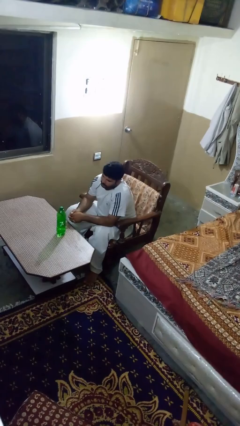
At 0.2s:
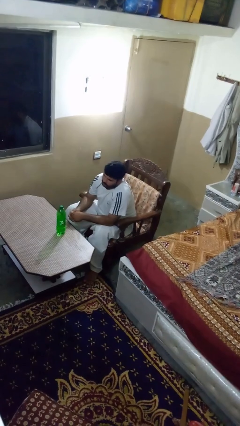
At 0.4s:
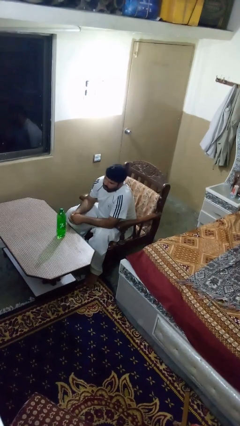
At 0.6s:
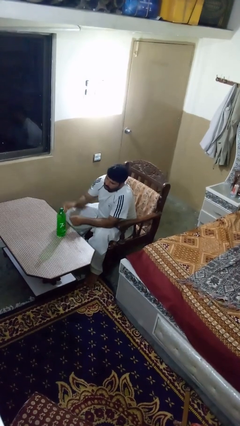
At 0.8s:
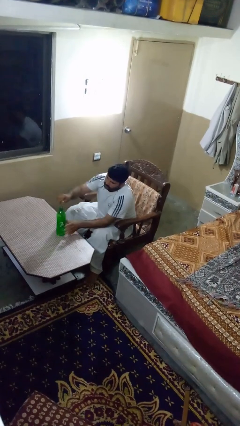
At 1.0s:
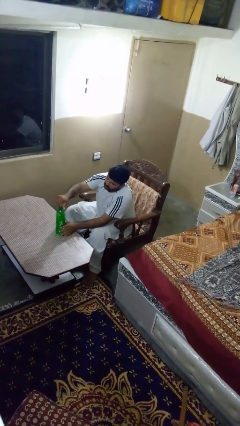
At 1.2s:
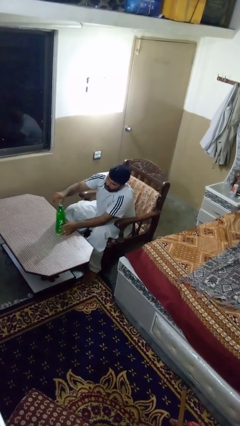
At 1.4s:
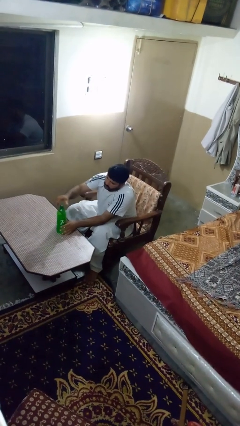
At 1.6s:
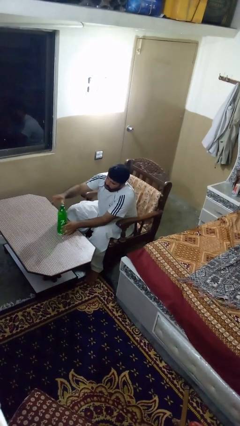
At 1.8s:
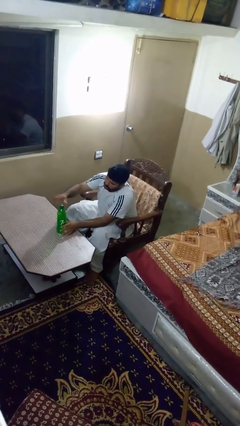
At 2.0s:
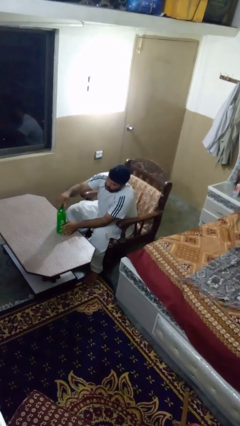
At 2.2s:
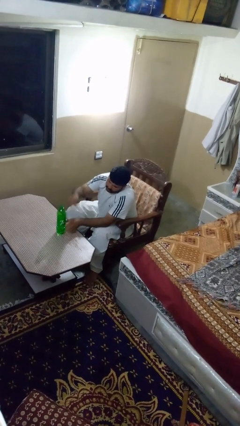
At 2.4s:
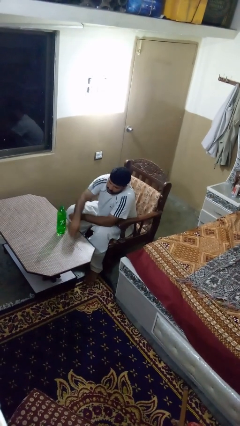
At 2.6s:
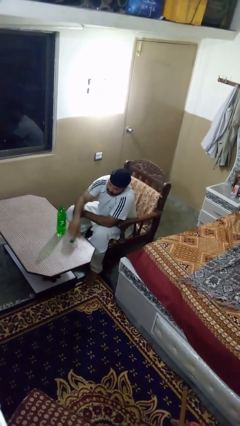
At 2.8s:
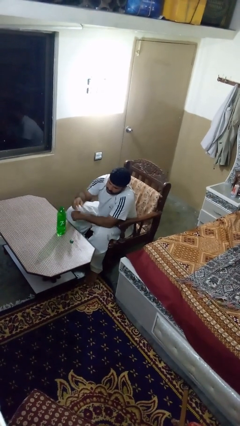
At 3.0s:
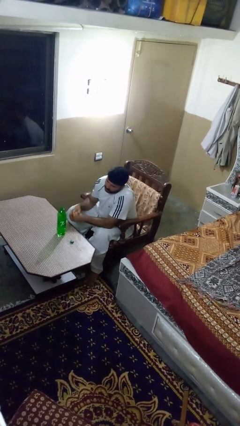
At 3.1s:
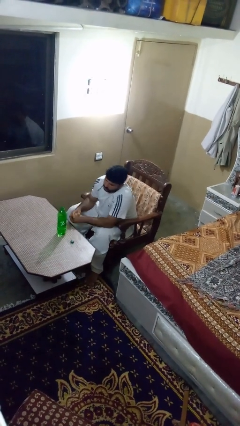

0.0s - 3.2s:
person unscrews lid from bottle

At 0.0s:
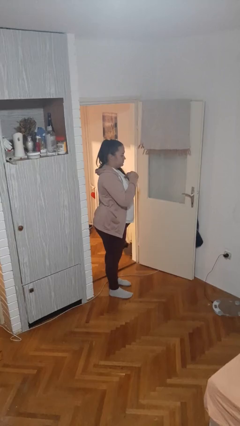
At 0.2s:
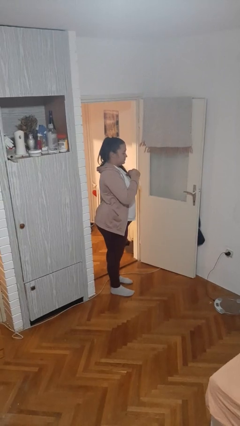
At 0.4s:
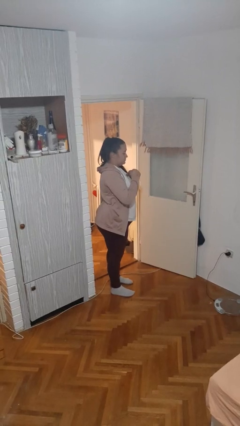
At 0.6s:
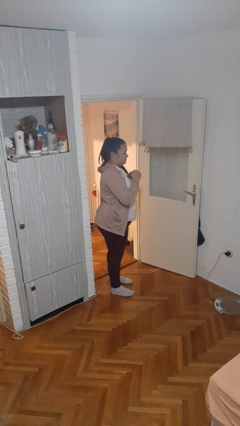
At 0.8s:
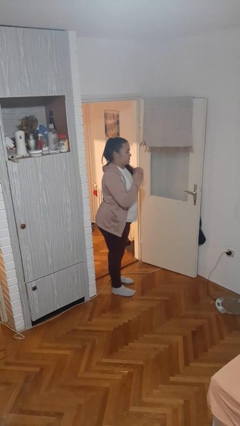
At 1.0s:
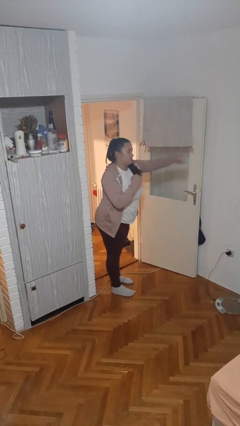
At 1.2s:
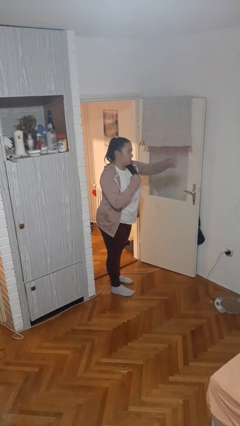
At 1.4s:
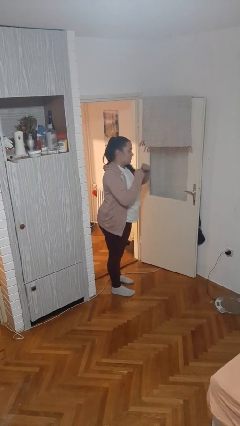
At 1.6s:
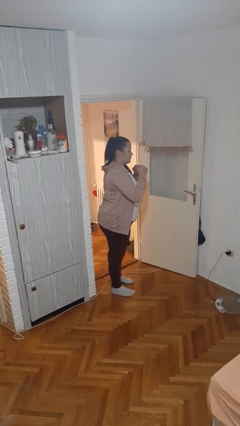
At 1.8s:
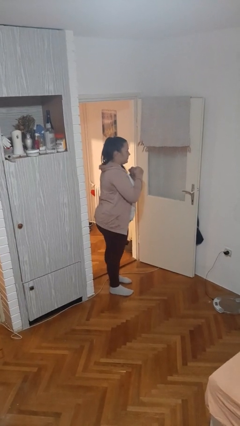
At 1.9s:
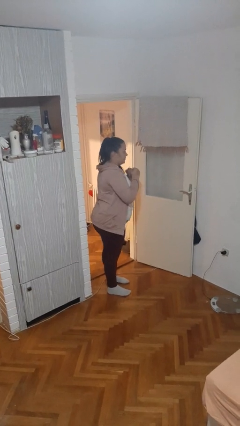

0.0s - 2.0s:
person punches

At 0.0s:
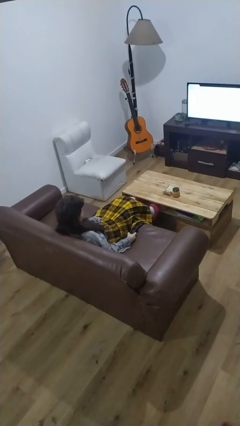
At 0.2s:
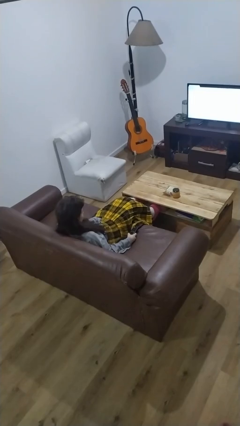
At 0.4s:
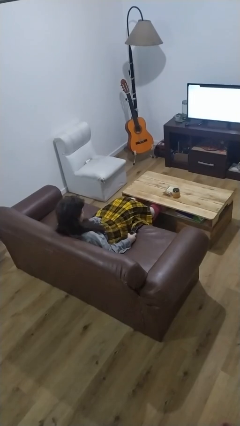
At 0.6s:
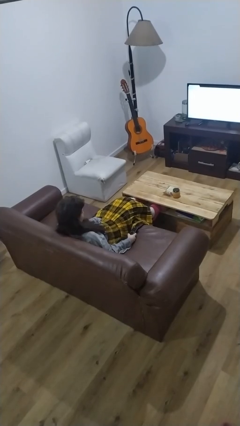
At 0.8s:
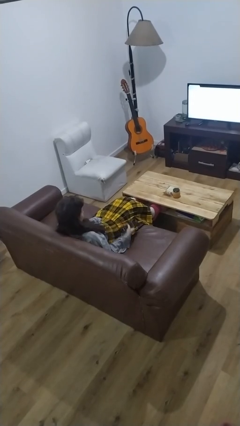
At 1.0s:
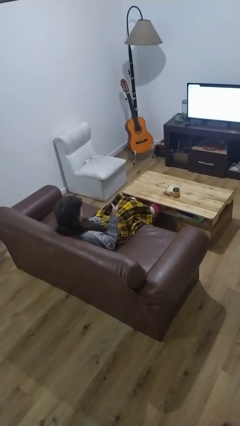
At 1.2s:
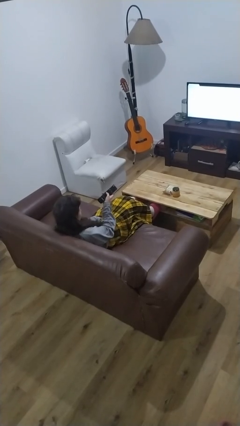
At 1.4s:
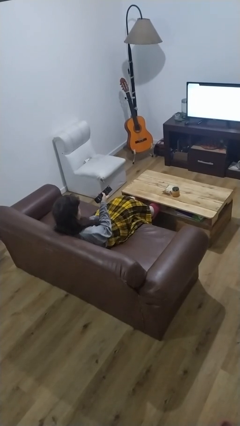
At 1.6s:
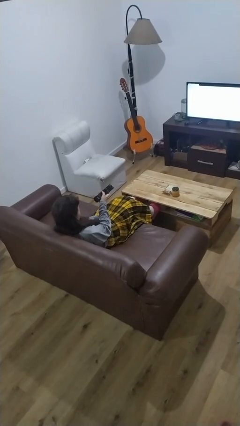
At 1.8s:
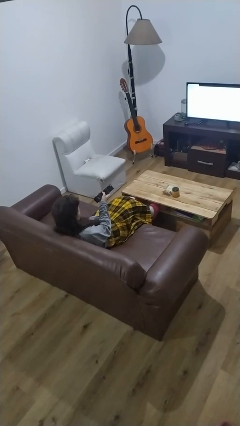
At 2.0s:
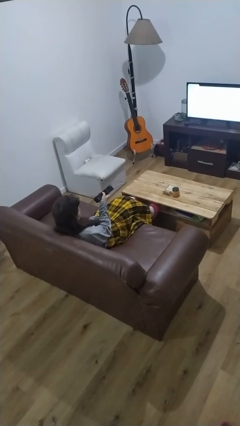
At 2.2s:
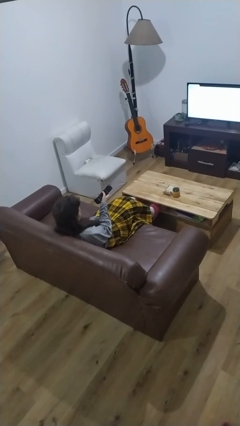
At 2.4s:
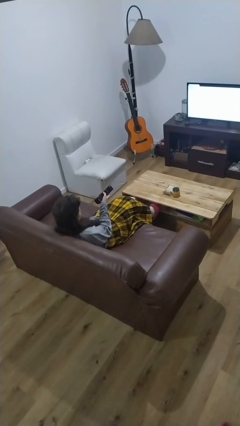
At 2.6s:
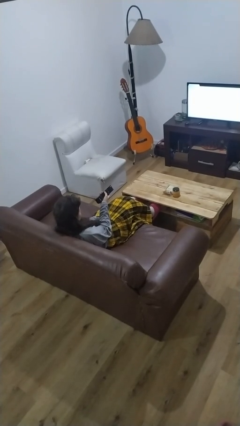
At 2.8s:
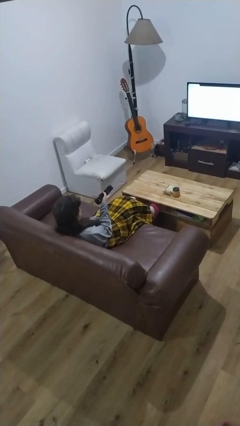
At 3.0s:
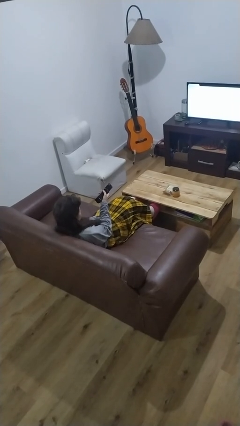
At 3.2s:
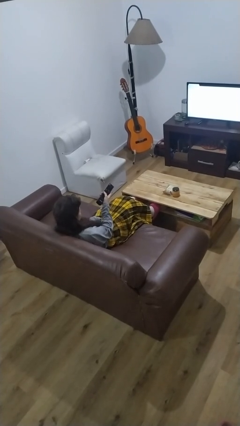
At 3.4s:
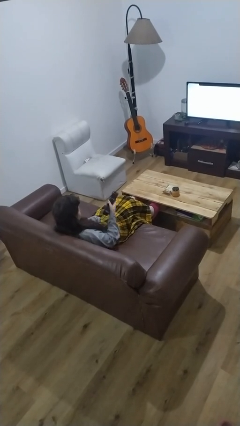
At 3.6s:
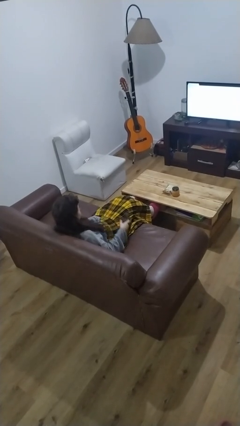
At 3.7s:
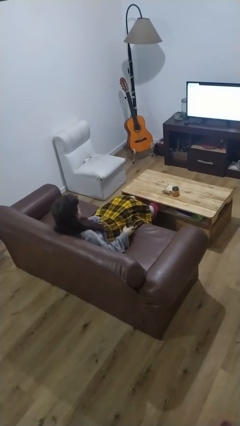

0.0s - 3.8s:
person uses television remote

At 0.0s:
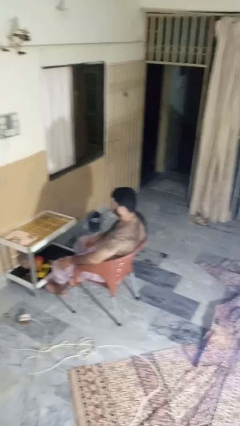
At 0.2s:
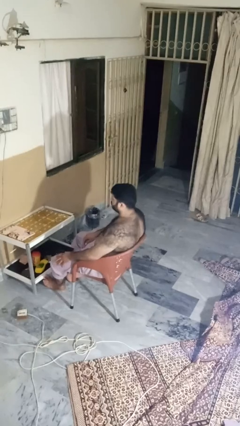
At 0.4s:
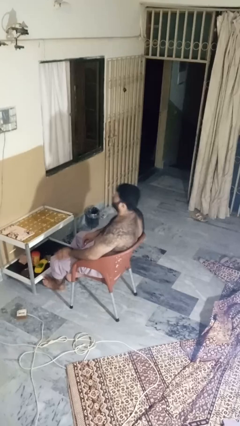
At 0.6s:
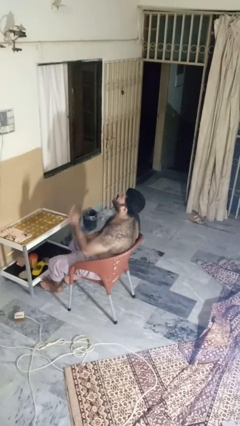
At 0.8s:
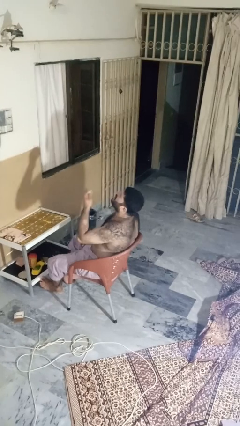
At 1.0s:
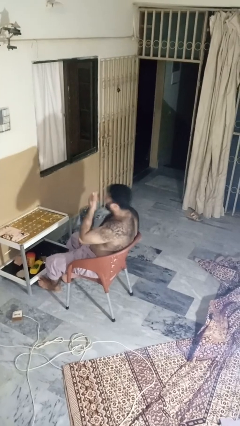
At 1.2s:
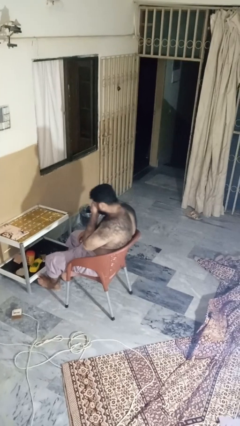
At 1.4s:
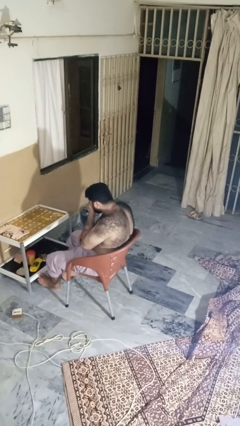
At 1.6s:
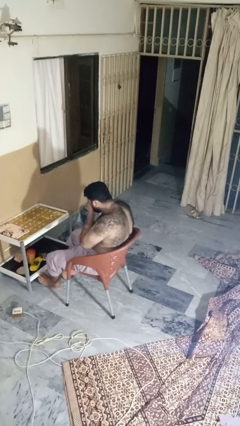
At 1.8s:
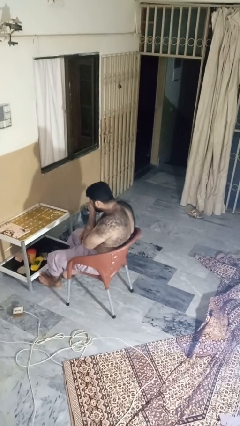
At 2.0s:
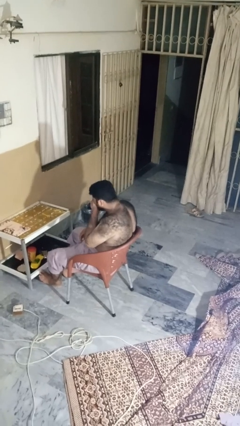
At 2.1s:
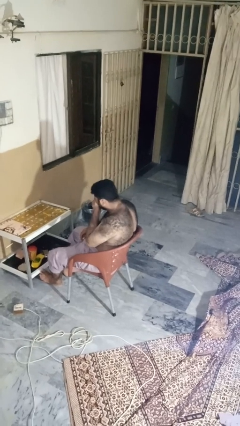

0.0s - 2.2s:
person sneezes into hand

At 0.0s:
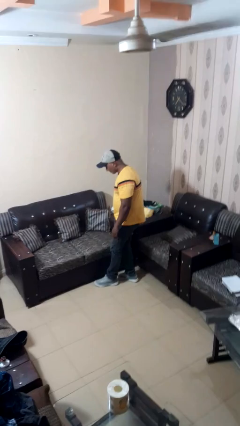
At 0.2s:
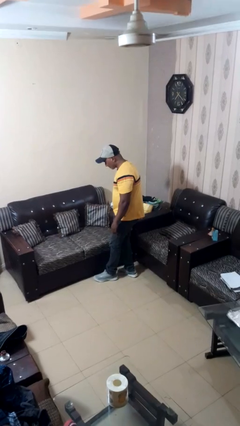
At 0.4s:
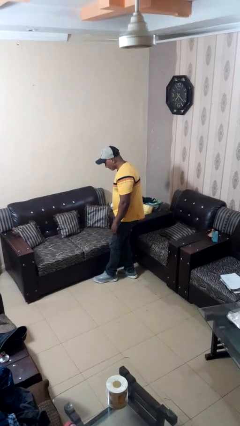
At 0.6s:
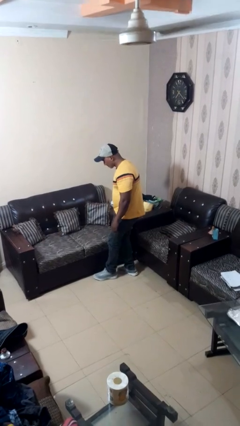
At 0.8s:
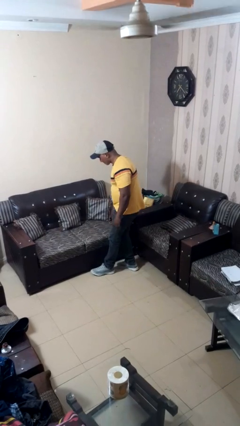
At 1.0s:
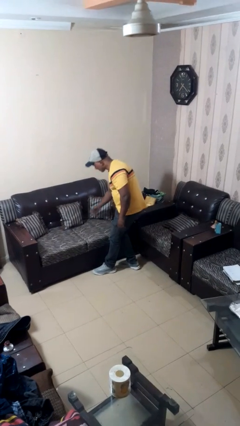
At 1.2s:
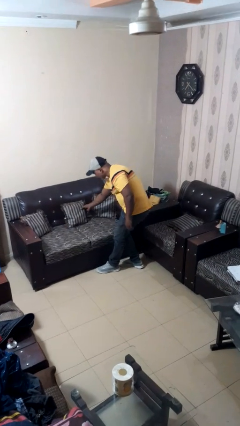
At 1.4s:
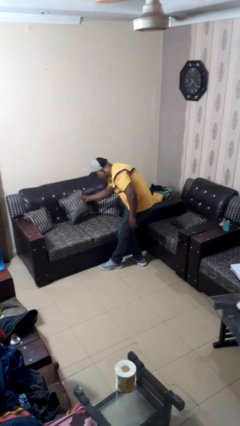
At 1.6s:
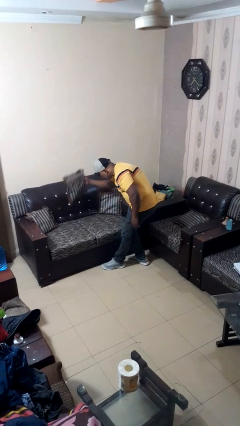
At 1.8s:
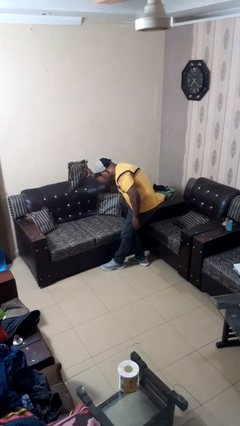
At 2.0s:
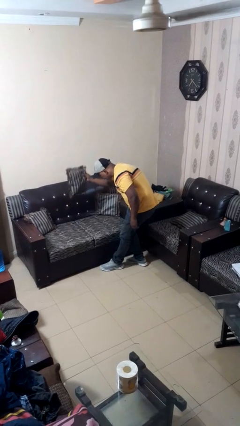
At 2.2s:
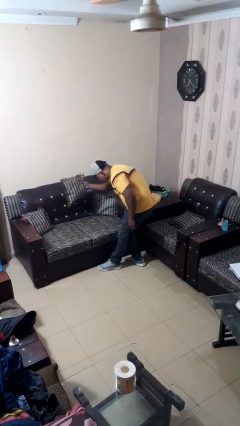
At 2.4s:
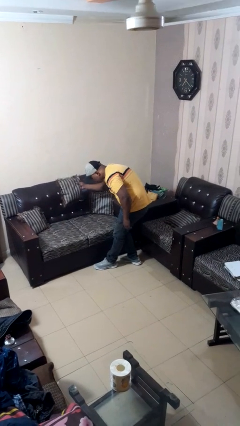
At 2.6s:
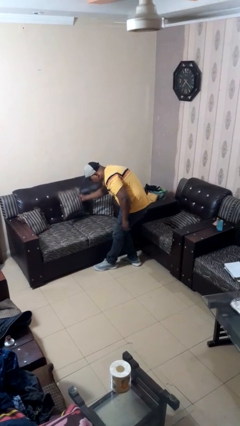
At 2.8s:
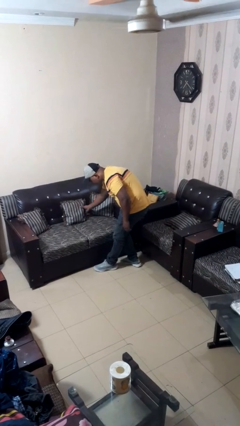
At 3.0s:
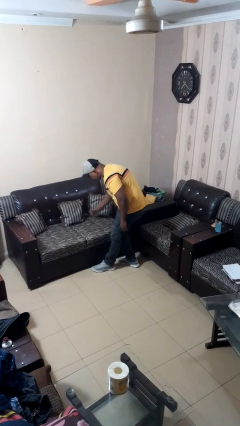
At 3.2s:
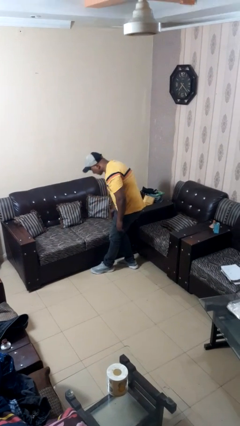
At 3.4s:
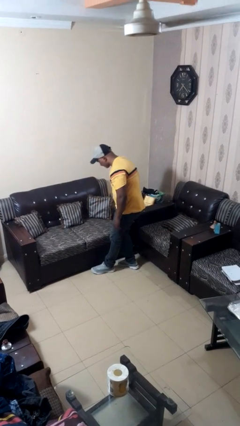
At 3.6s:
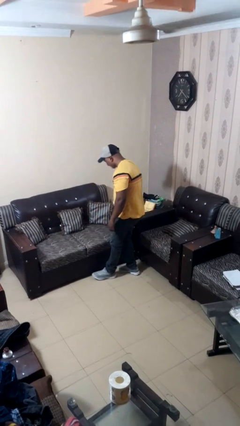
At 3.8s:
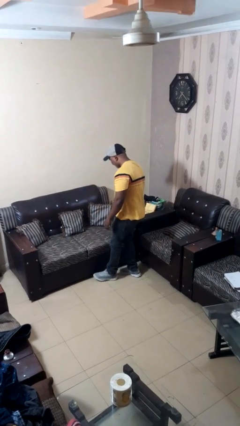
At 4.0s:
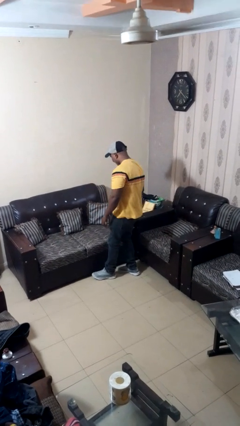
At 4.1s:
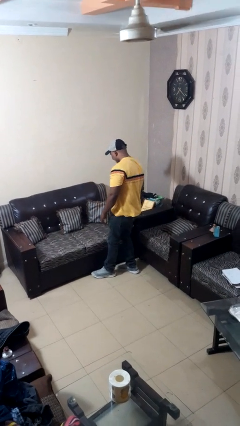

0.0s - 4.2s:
person searches in couch

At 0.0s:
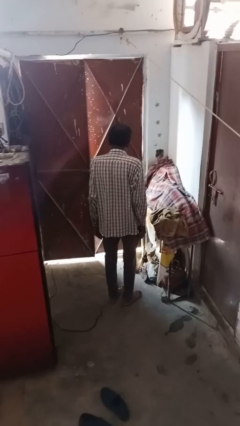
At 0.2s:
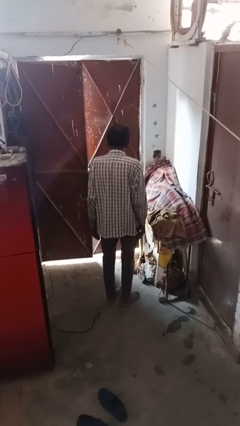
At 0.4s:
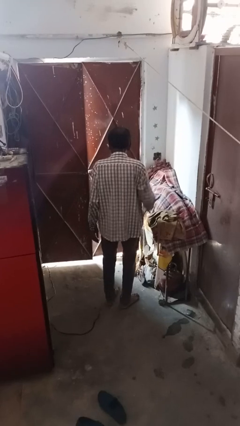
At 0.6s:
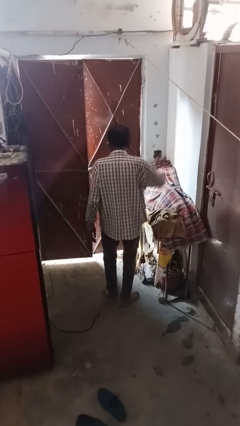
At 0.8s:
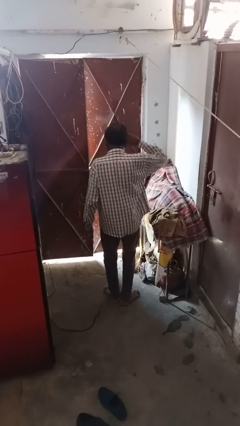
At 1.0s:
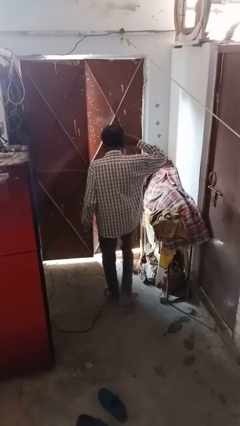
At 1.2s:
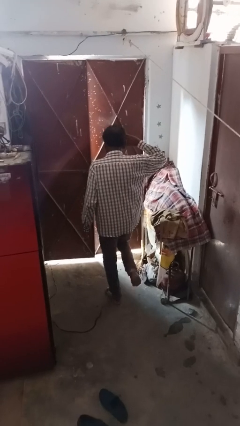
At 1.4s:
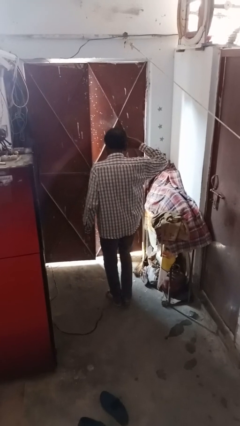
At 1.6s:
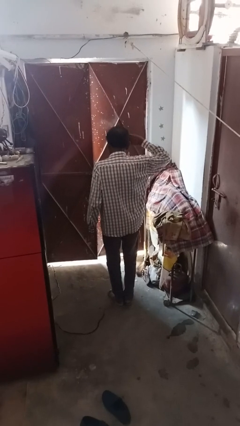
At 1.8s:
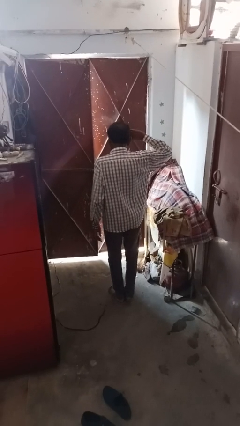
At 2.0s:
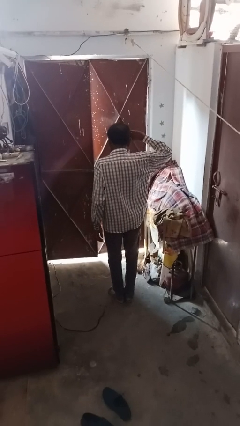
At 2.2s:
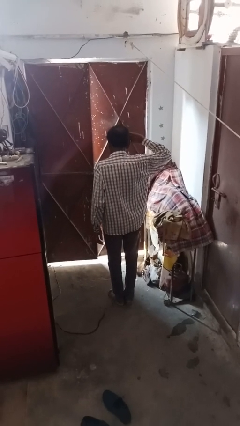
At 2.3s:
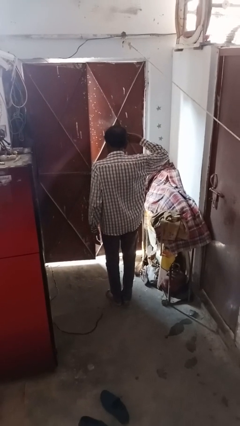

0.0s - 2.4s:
person salutes
